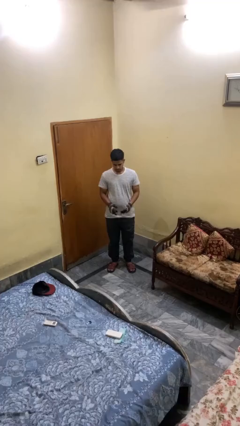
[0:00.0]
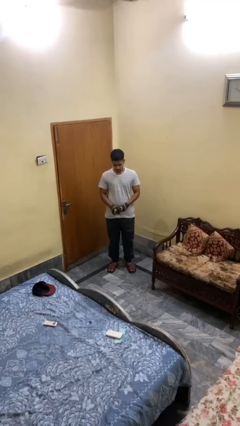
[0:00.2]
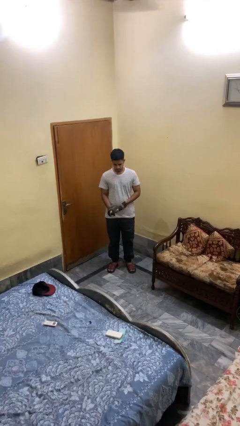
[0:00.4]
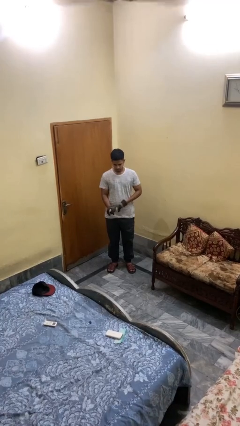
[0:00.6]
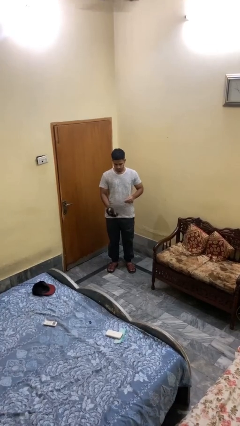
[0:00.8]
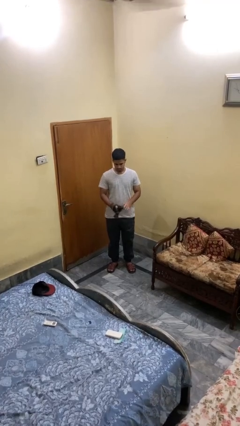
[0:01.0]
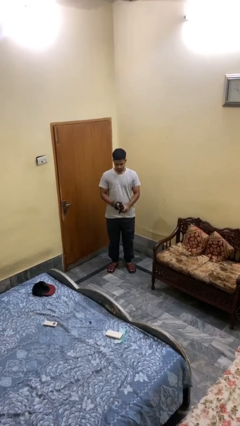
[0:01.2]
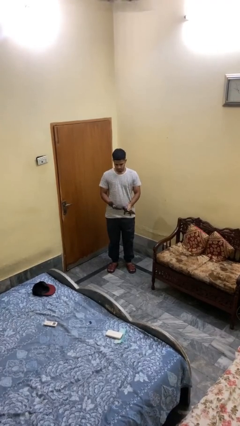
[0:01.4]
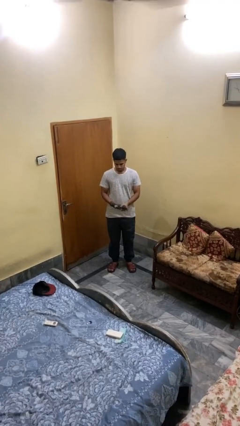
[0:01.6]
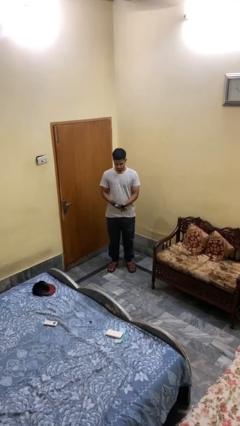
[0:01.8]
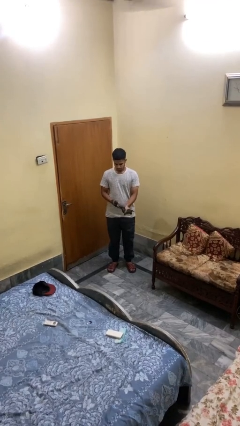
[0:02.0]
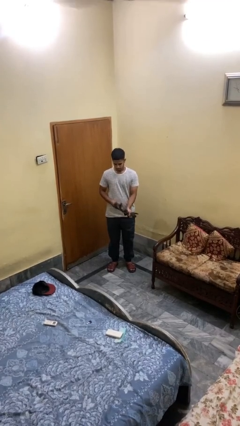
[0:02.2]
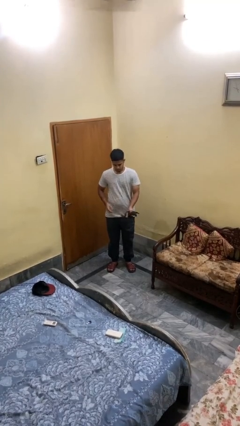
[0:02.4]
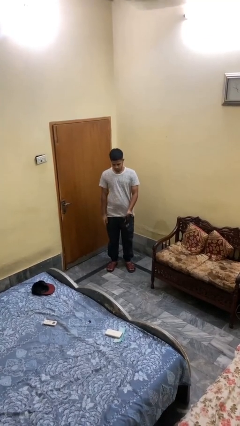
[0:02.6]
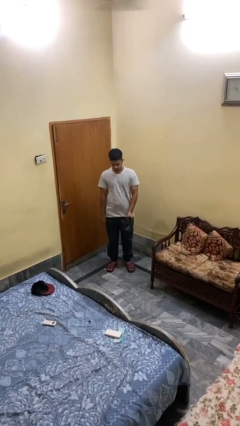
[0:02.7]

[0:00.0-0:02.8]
person takes off gloves

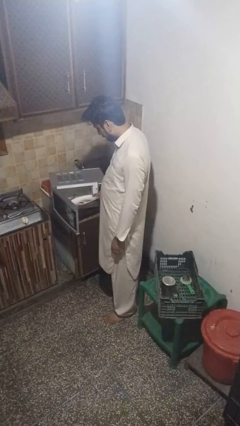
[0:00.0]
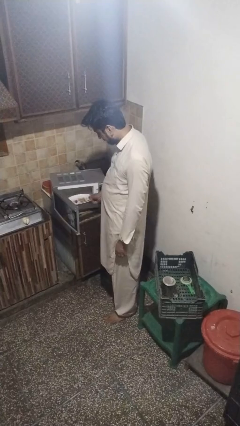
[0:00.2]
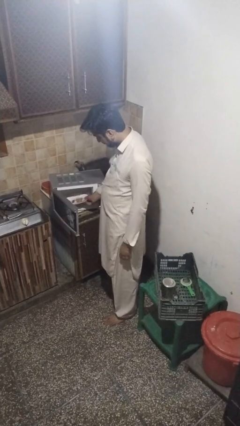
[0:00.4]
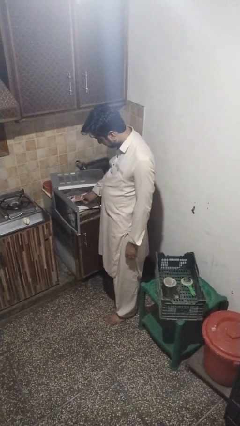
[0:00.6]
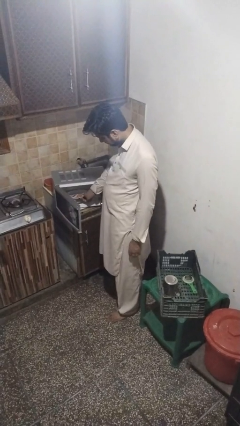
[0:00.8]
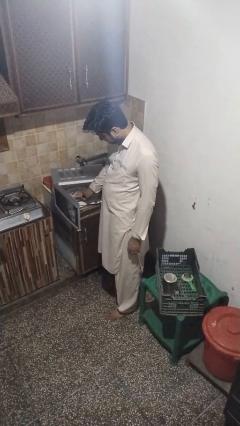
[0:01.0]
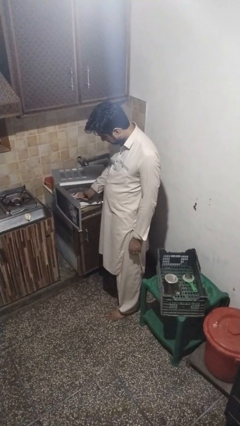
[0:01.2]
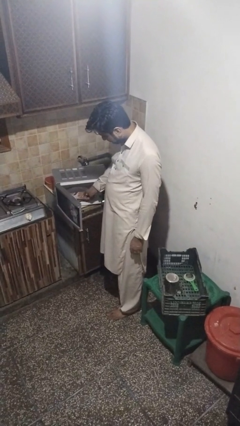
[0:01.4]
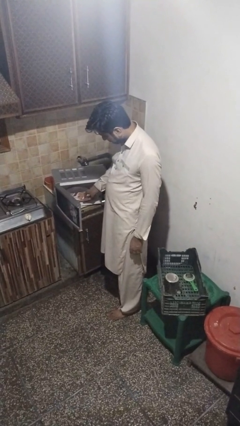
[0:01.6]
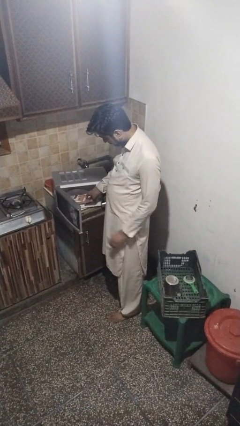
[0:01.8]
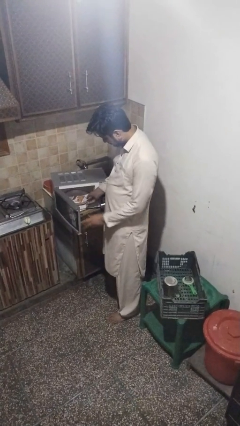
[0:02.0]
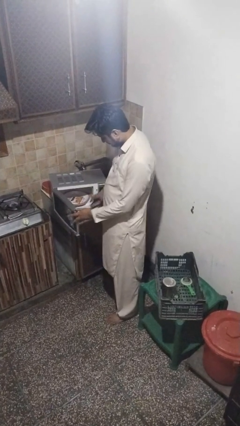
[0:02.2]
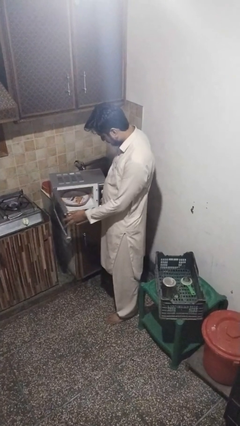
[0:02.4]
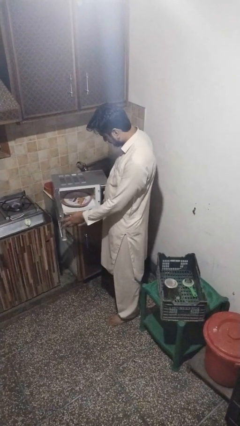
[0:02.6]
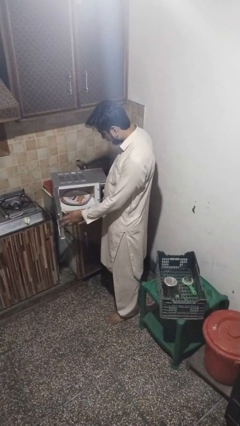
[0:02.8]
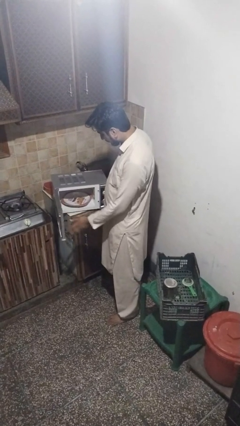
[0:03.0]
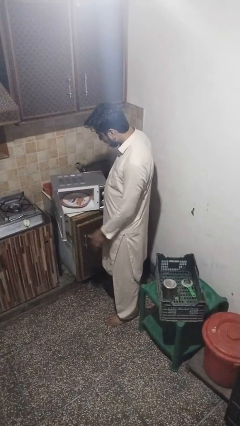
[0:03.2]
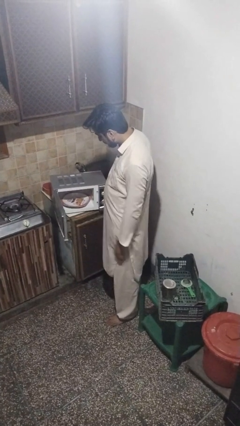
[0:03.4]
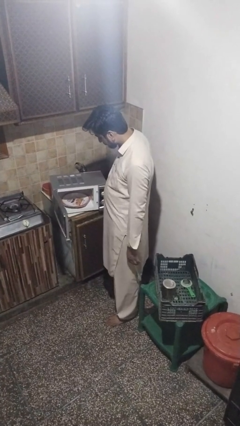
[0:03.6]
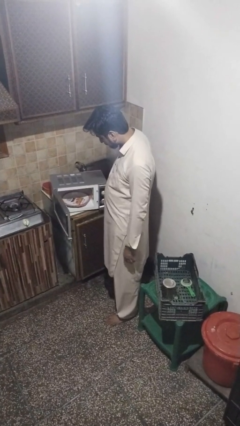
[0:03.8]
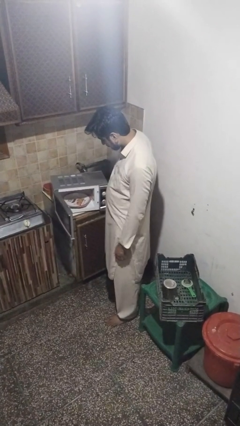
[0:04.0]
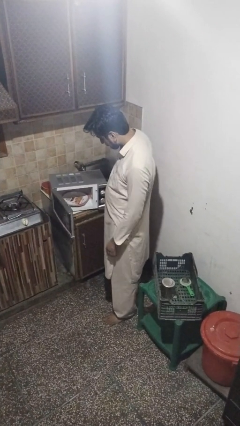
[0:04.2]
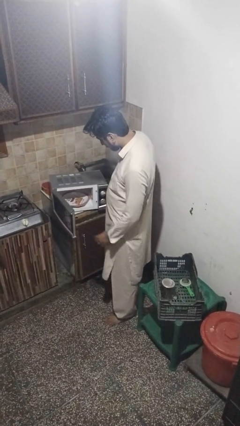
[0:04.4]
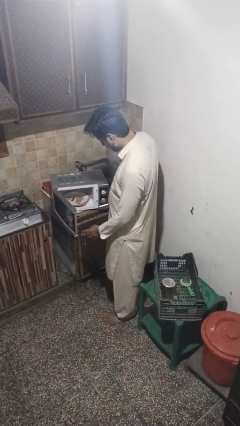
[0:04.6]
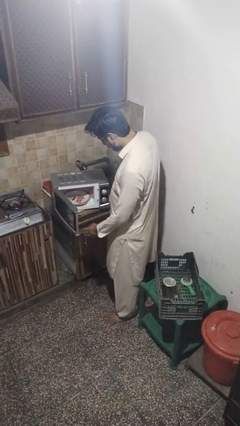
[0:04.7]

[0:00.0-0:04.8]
person puts object into microwave

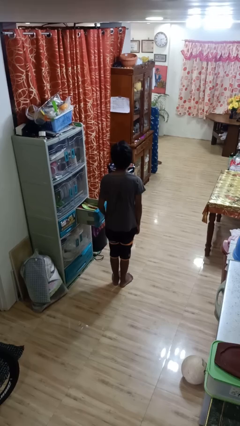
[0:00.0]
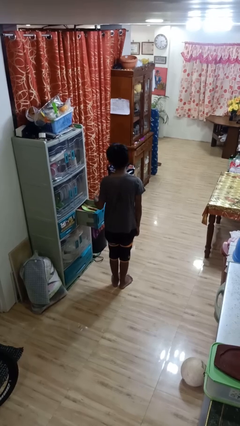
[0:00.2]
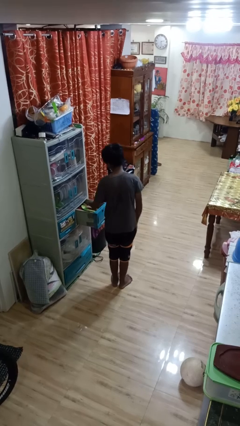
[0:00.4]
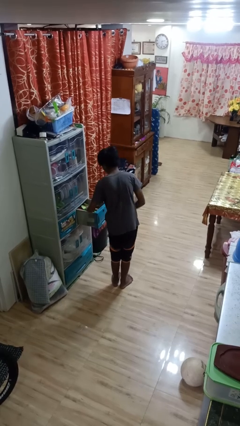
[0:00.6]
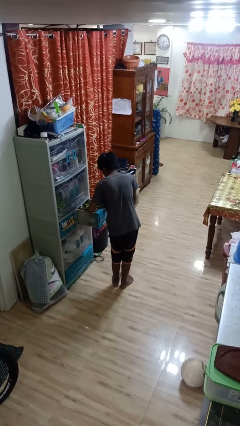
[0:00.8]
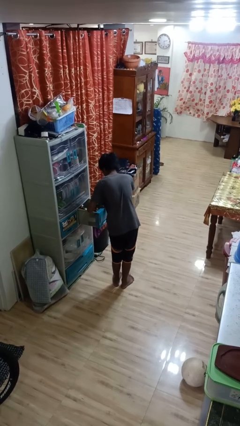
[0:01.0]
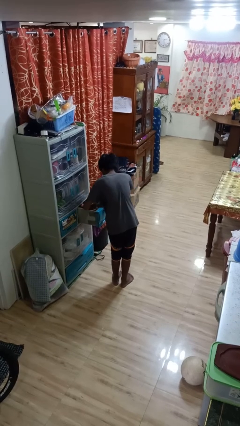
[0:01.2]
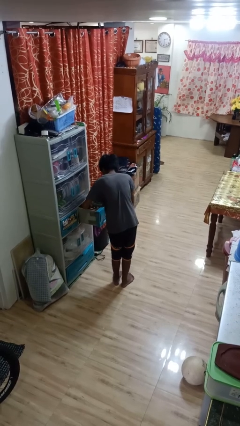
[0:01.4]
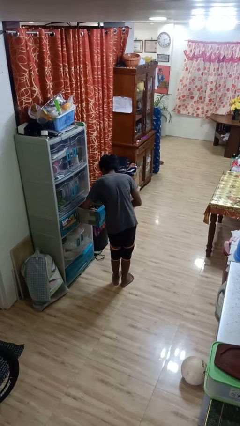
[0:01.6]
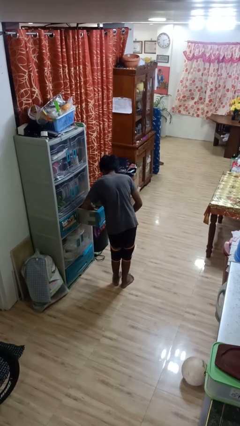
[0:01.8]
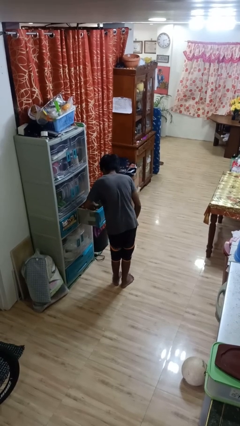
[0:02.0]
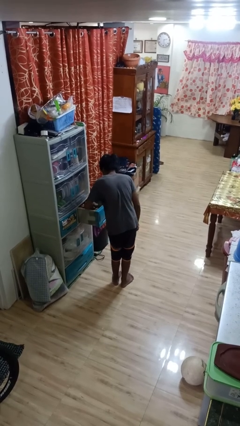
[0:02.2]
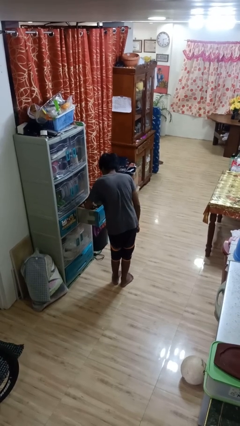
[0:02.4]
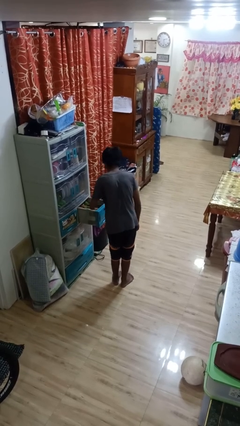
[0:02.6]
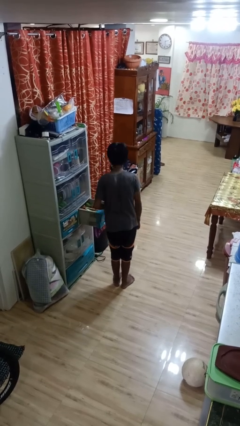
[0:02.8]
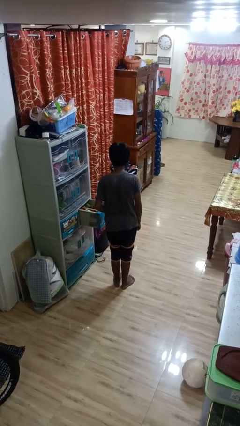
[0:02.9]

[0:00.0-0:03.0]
person searches in kitchen drawer

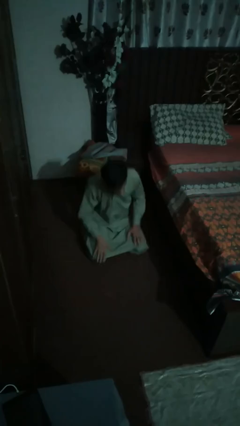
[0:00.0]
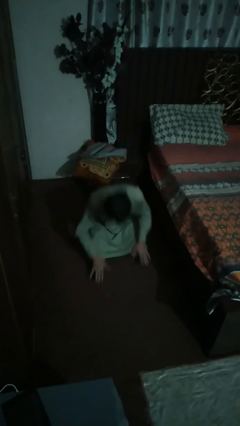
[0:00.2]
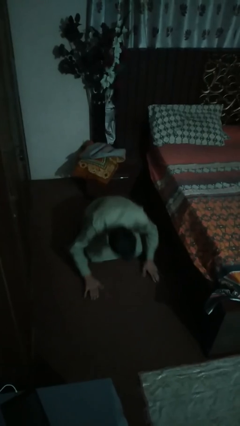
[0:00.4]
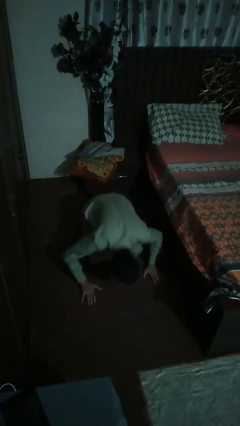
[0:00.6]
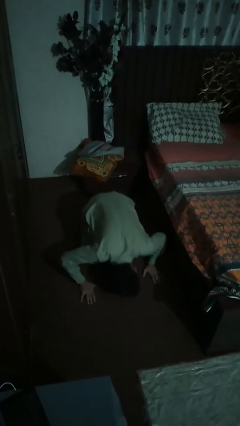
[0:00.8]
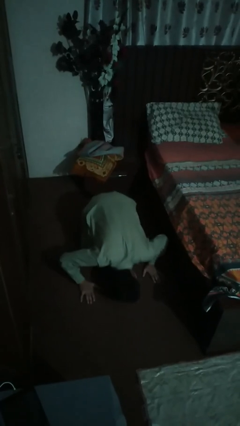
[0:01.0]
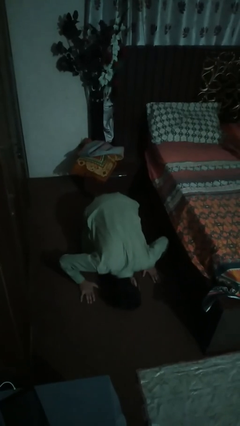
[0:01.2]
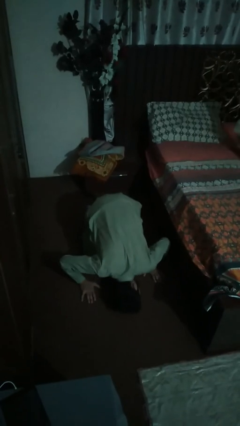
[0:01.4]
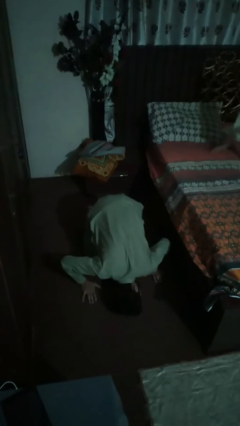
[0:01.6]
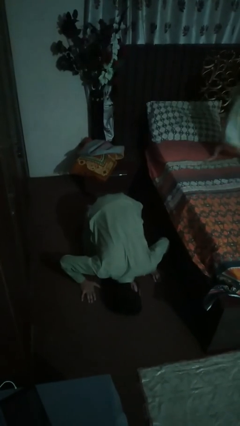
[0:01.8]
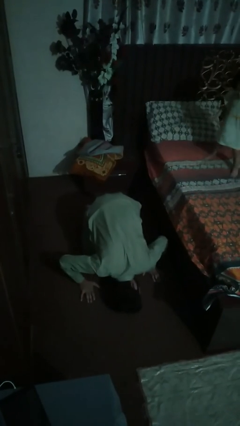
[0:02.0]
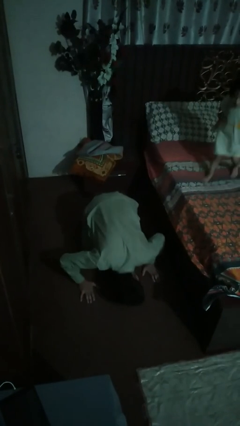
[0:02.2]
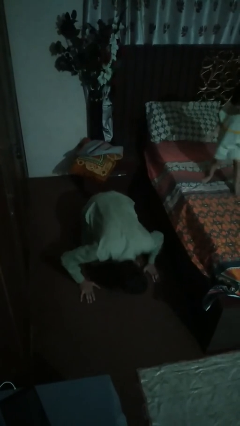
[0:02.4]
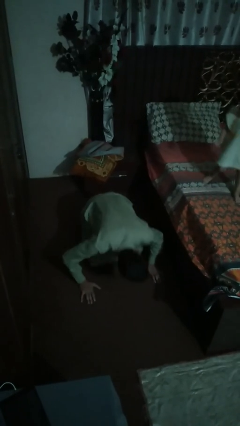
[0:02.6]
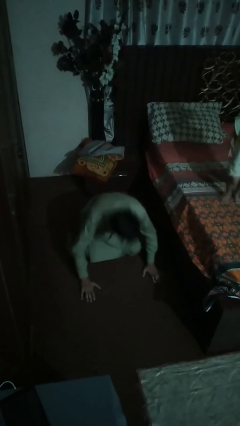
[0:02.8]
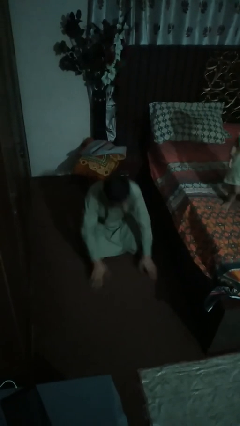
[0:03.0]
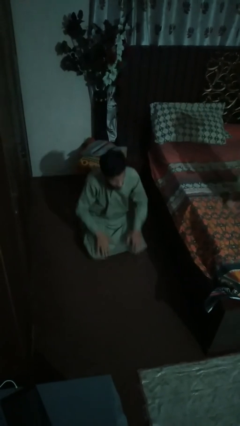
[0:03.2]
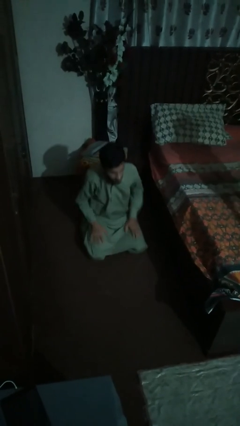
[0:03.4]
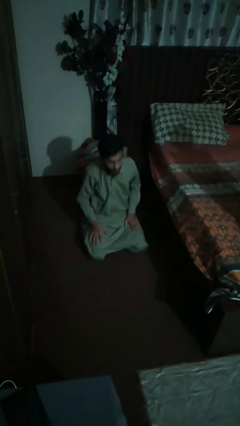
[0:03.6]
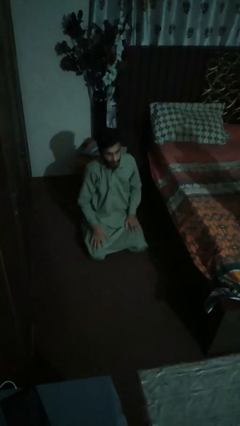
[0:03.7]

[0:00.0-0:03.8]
person searches under bed

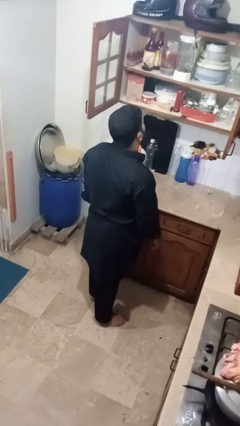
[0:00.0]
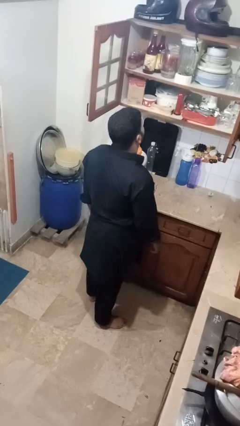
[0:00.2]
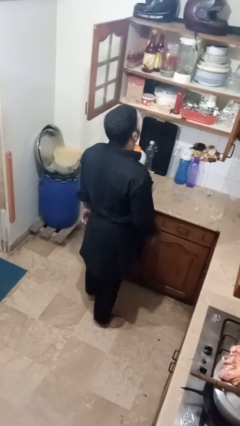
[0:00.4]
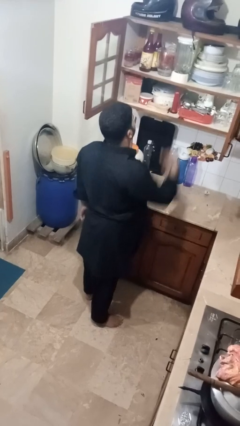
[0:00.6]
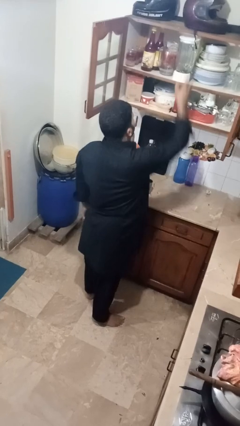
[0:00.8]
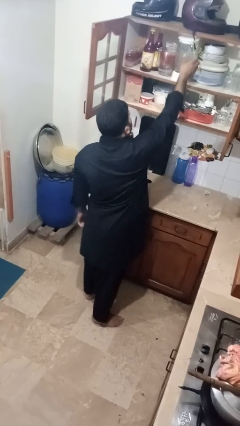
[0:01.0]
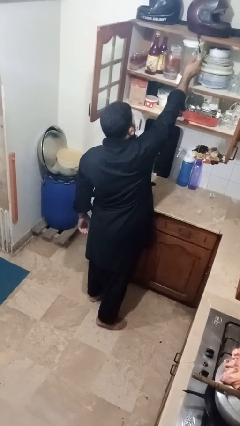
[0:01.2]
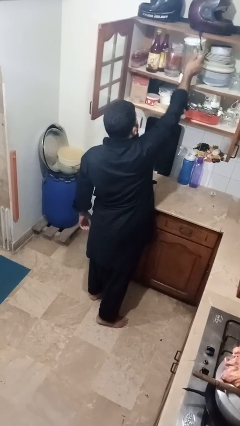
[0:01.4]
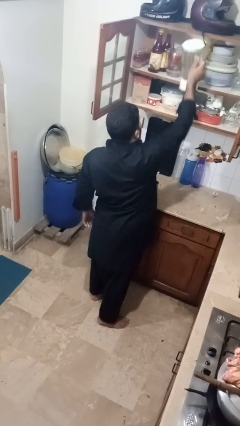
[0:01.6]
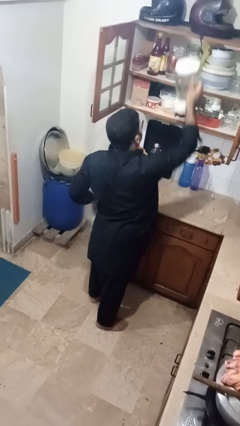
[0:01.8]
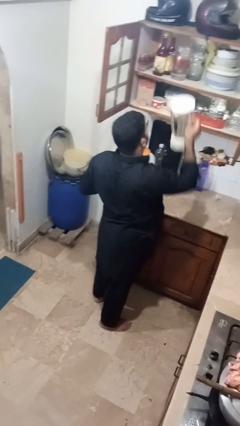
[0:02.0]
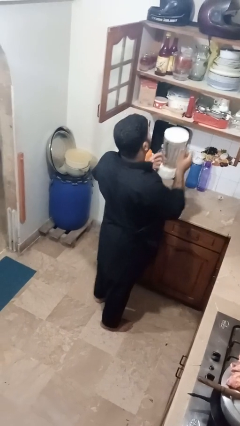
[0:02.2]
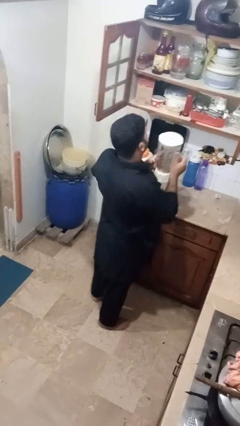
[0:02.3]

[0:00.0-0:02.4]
person picks up object from cabinet

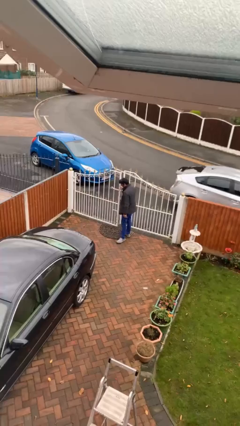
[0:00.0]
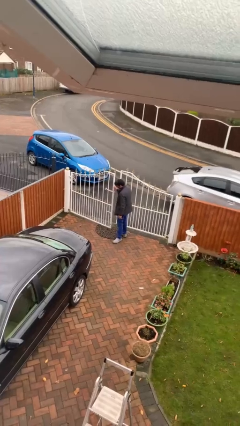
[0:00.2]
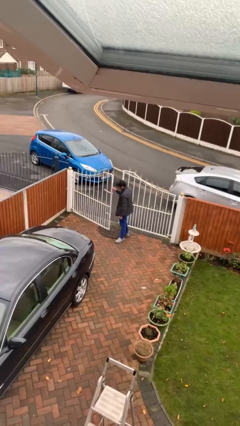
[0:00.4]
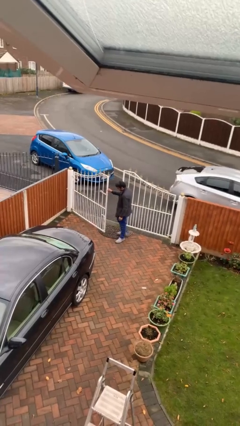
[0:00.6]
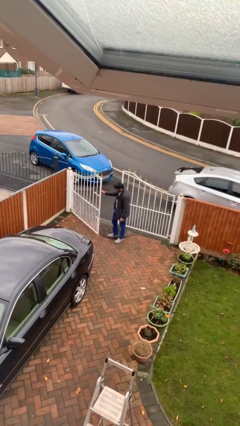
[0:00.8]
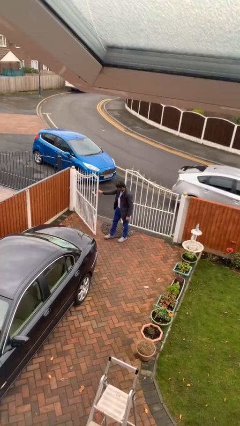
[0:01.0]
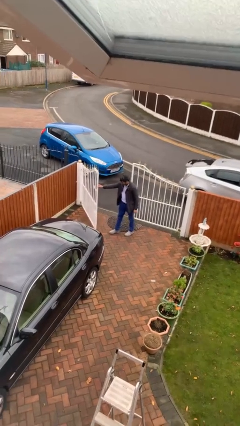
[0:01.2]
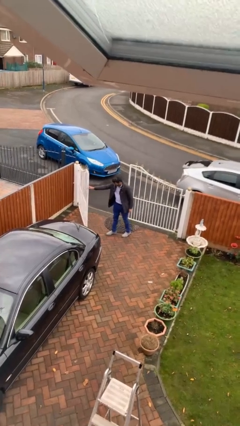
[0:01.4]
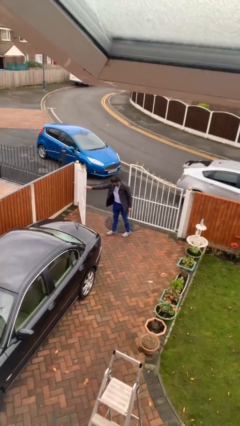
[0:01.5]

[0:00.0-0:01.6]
person opens facility door
